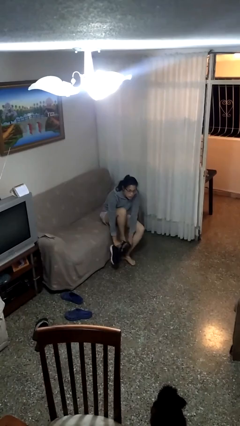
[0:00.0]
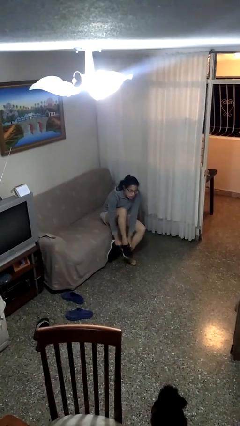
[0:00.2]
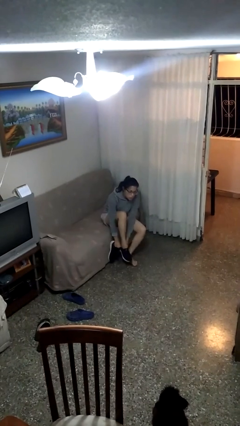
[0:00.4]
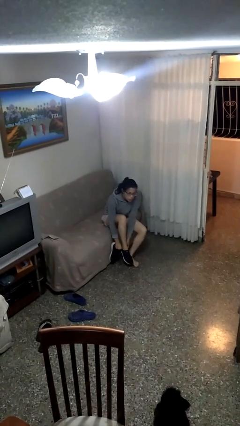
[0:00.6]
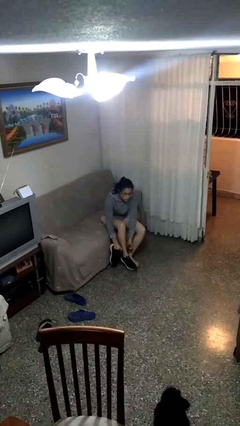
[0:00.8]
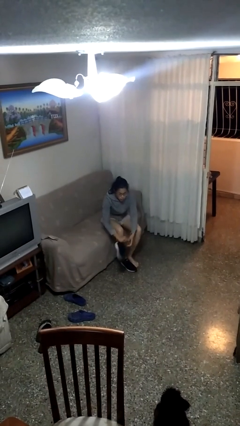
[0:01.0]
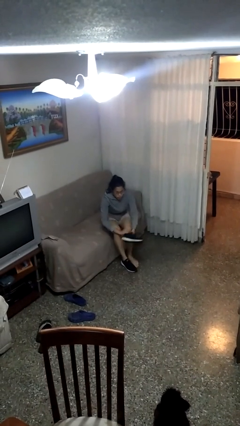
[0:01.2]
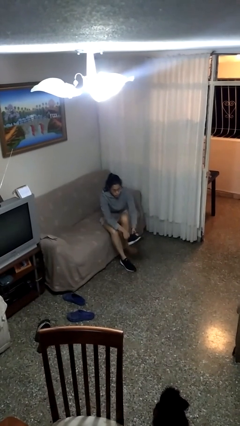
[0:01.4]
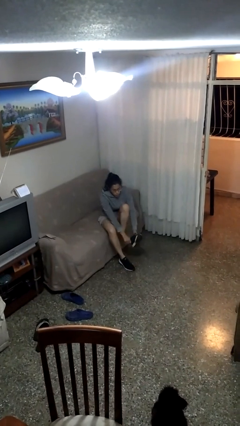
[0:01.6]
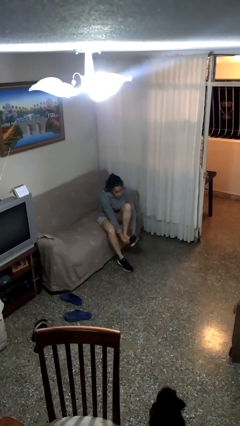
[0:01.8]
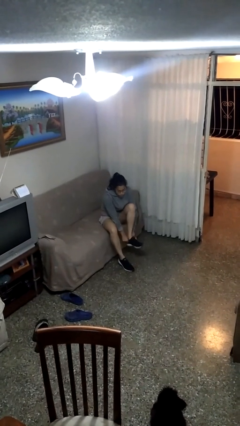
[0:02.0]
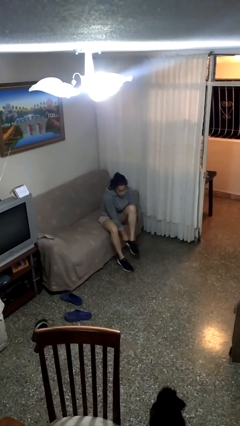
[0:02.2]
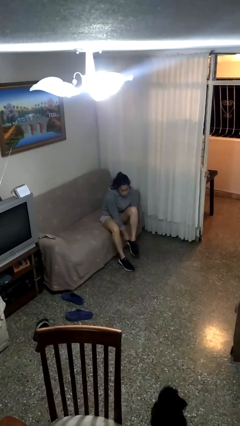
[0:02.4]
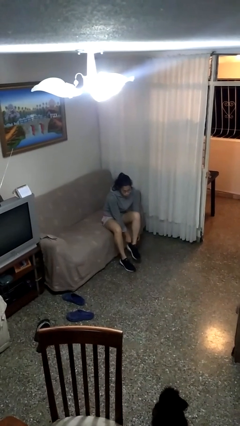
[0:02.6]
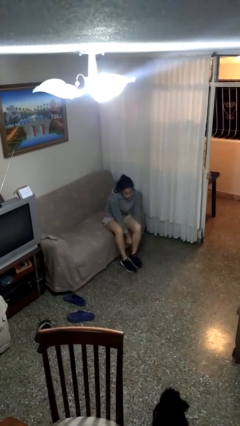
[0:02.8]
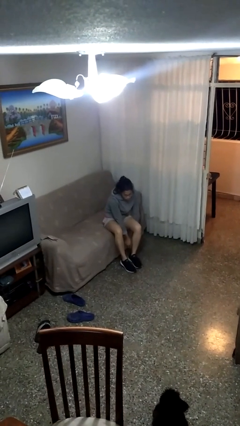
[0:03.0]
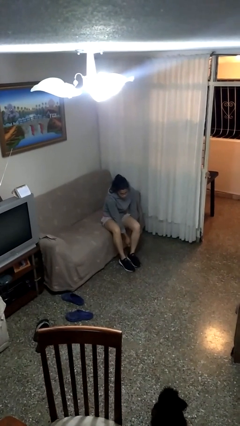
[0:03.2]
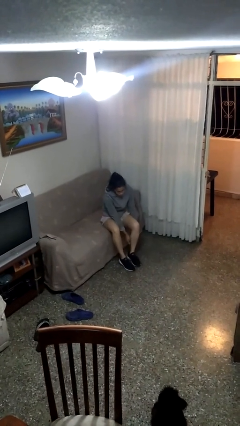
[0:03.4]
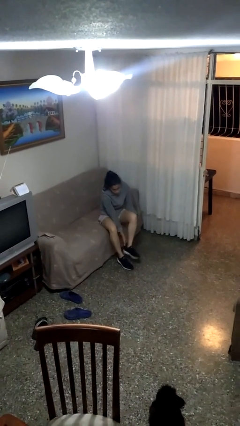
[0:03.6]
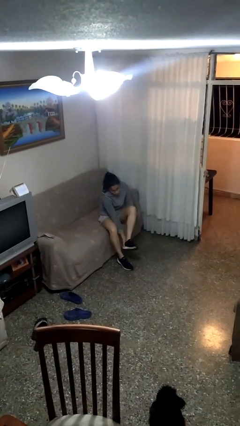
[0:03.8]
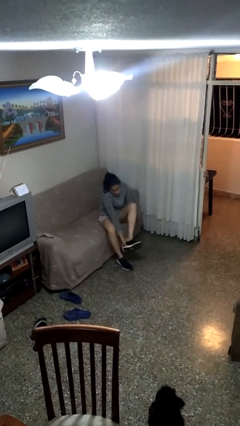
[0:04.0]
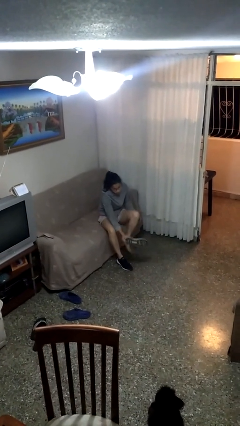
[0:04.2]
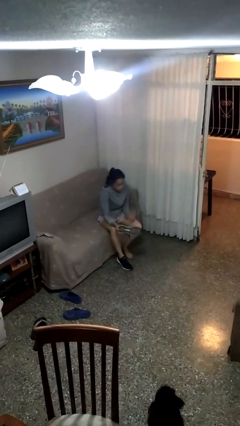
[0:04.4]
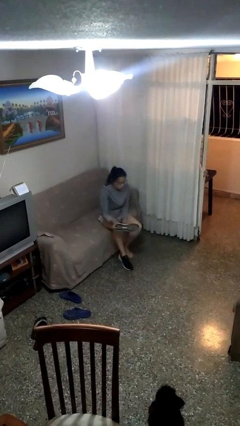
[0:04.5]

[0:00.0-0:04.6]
person puts on shoes

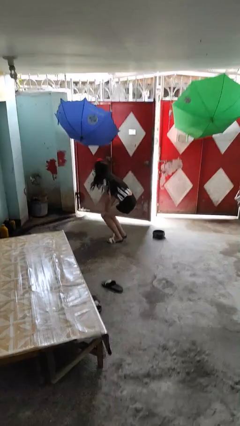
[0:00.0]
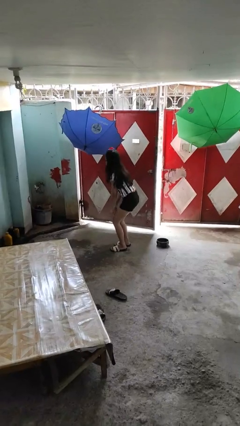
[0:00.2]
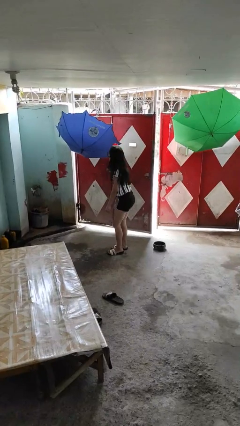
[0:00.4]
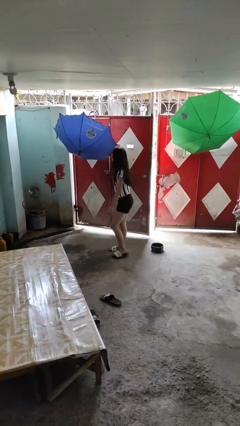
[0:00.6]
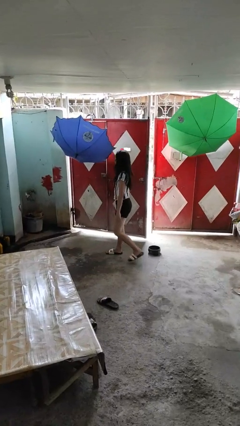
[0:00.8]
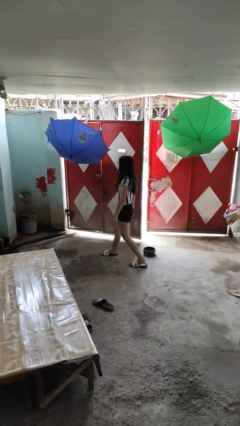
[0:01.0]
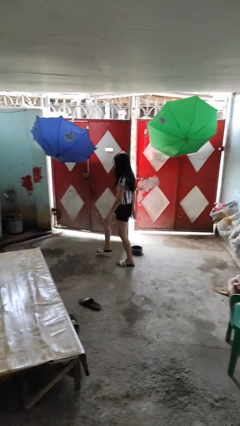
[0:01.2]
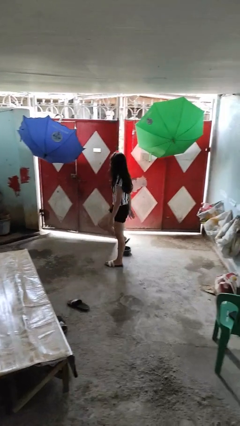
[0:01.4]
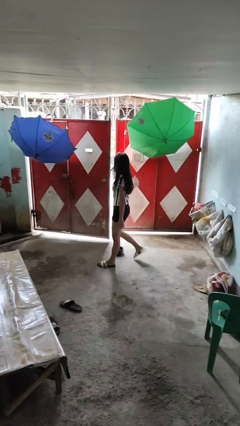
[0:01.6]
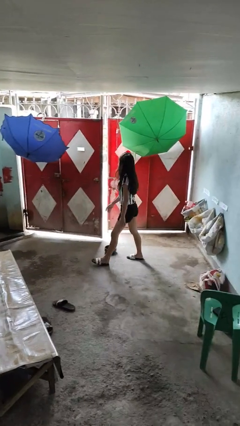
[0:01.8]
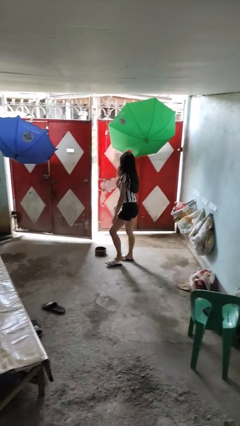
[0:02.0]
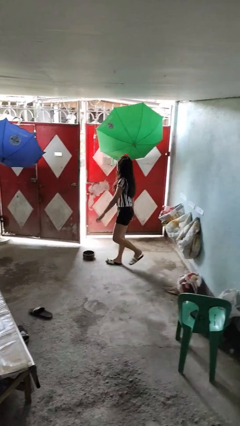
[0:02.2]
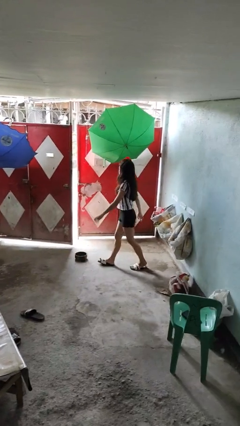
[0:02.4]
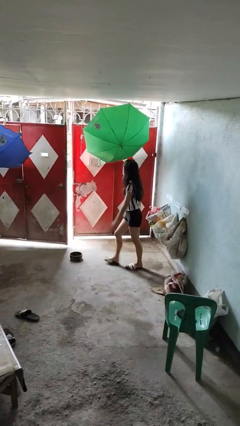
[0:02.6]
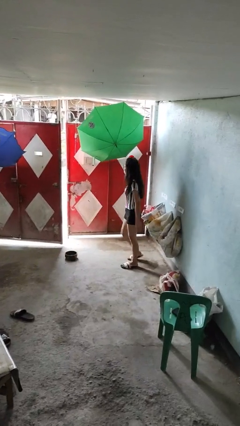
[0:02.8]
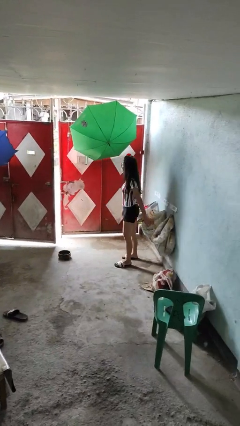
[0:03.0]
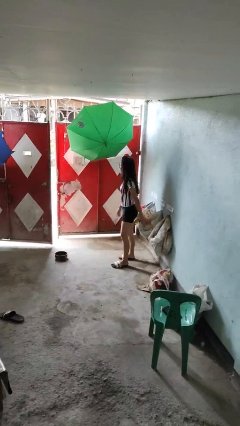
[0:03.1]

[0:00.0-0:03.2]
person stands up from floor

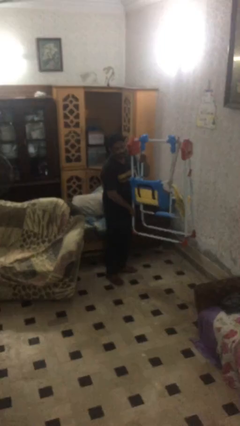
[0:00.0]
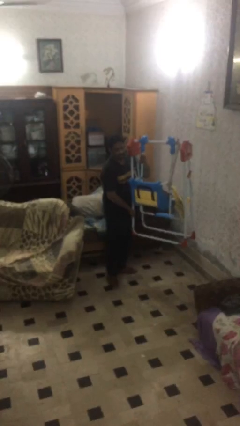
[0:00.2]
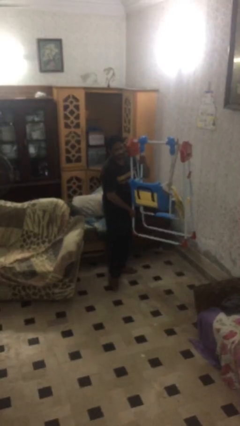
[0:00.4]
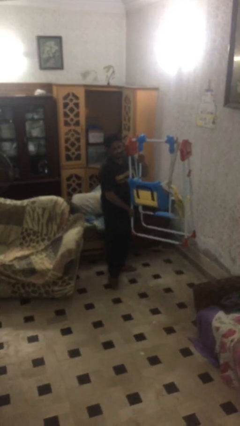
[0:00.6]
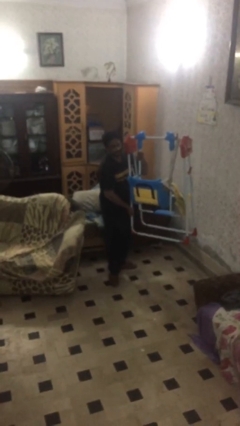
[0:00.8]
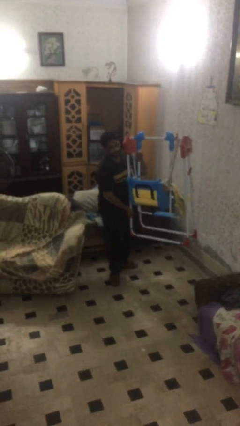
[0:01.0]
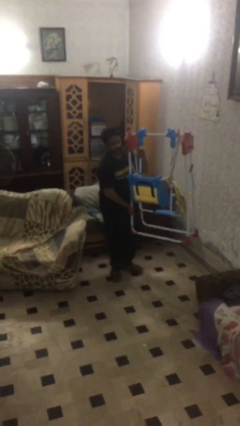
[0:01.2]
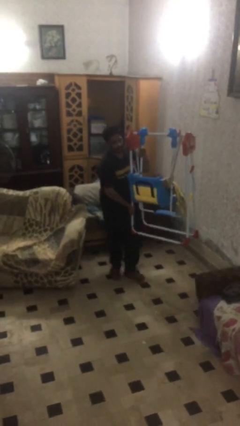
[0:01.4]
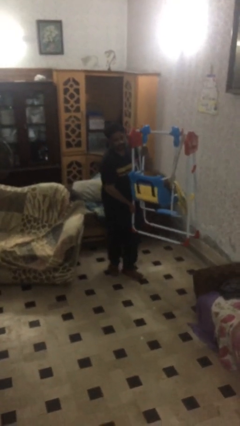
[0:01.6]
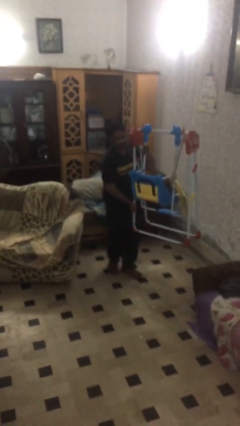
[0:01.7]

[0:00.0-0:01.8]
person carries heavy object

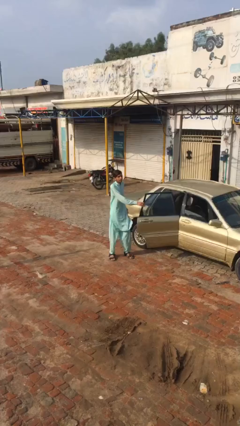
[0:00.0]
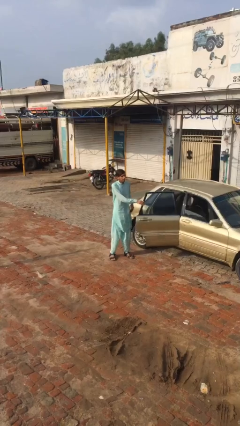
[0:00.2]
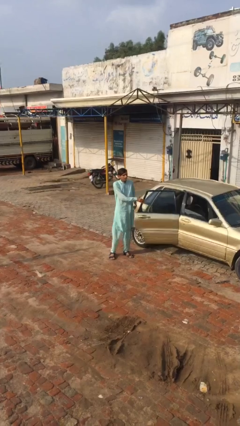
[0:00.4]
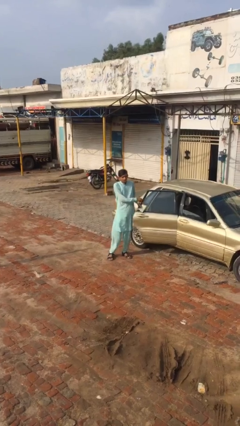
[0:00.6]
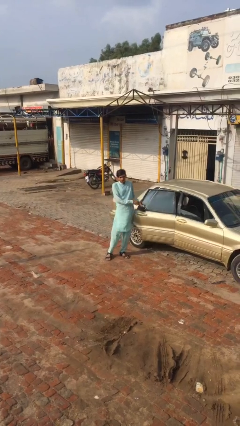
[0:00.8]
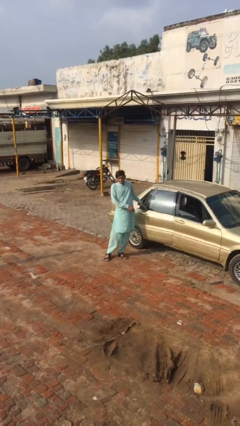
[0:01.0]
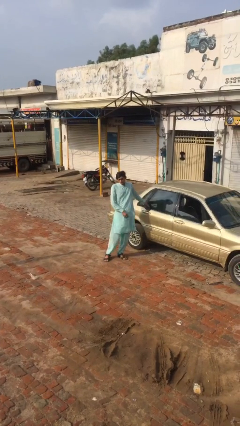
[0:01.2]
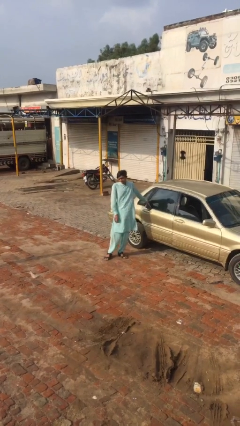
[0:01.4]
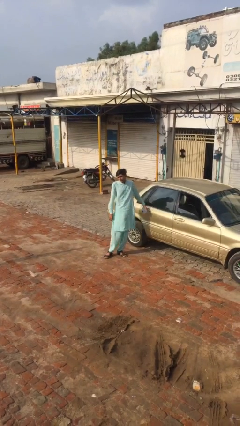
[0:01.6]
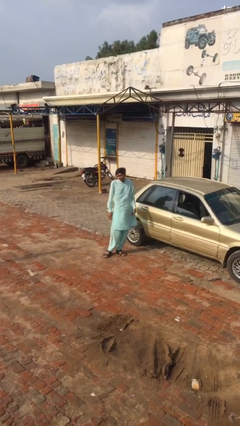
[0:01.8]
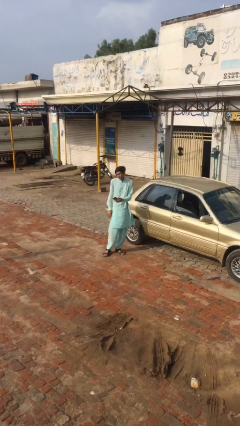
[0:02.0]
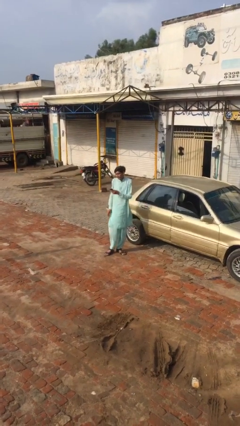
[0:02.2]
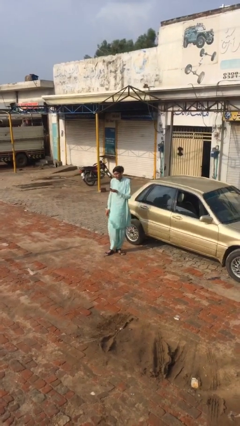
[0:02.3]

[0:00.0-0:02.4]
person closes car door

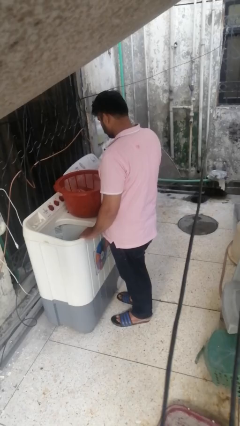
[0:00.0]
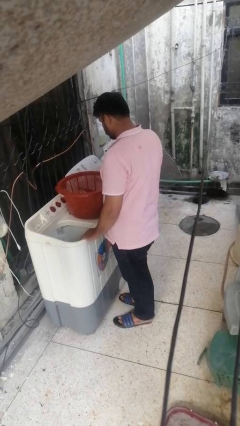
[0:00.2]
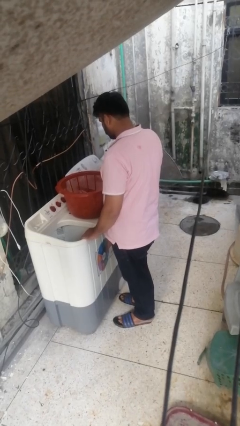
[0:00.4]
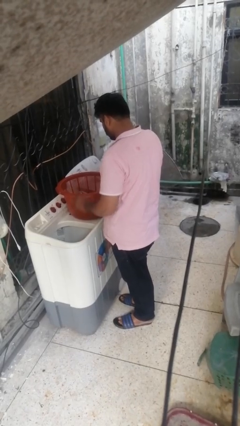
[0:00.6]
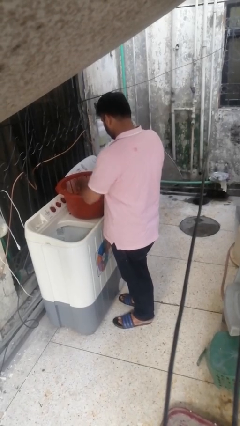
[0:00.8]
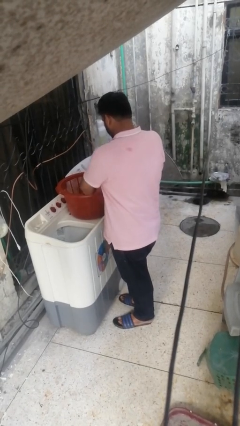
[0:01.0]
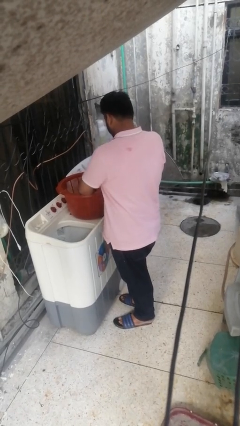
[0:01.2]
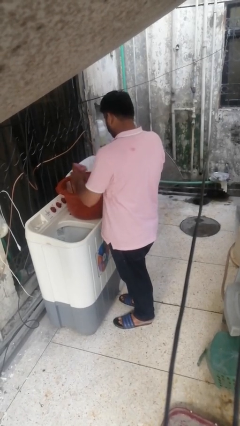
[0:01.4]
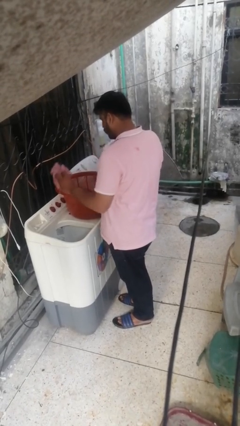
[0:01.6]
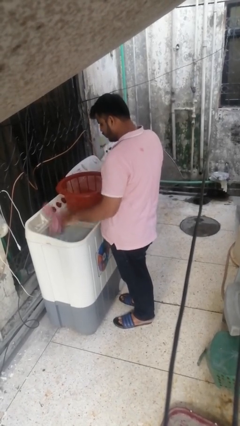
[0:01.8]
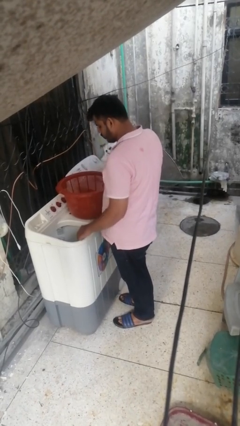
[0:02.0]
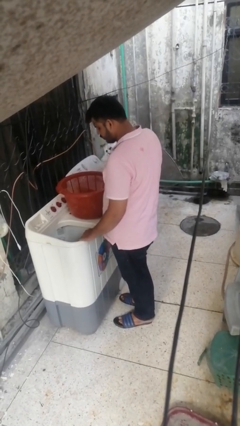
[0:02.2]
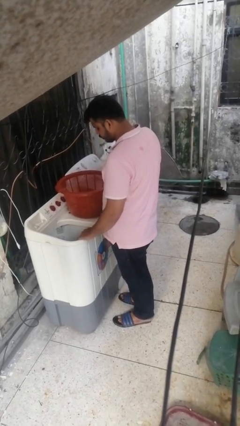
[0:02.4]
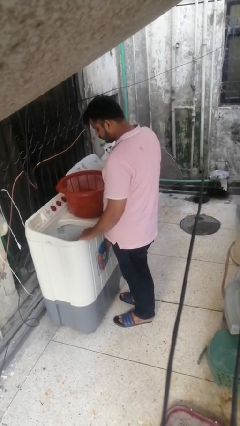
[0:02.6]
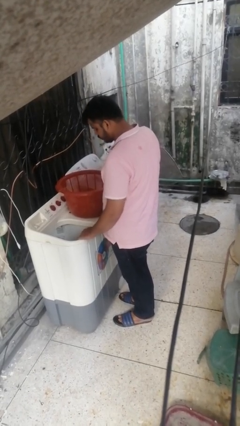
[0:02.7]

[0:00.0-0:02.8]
person loads clotheswasher

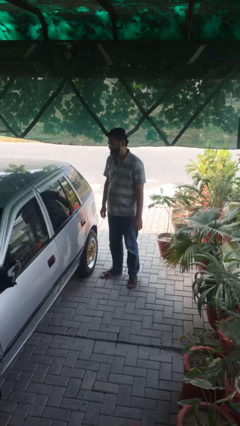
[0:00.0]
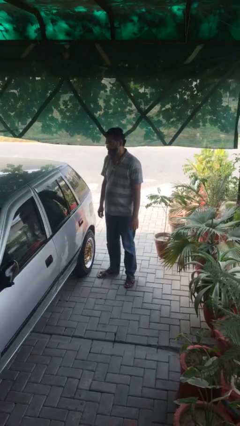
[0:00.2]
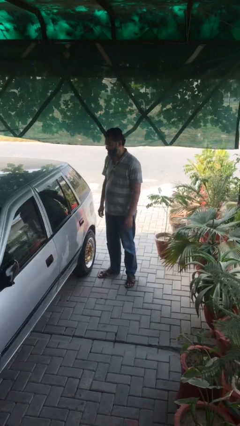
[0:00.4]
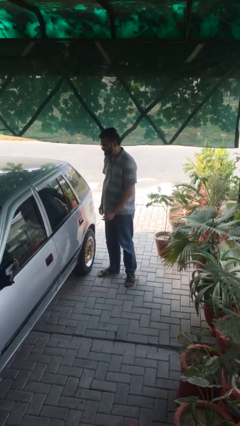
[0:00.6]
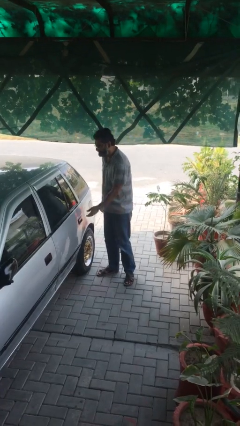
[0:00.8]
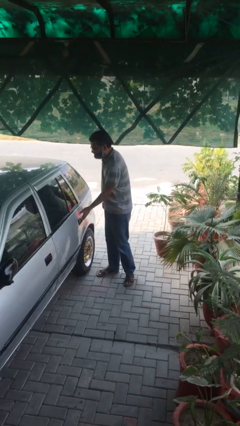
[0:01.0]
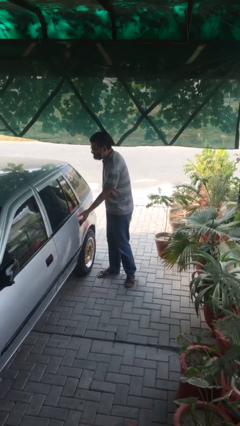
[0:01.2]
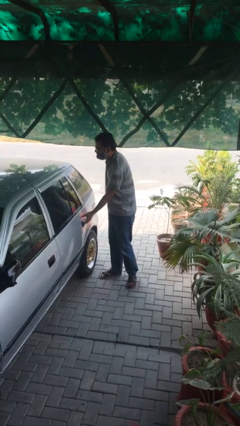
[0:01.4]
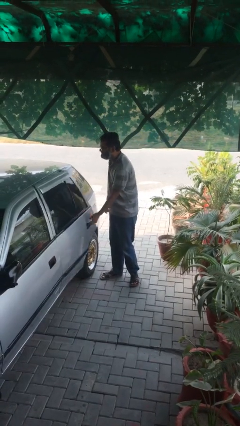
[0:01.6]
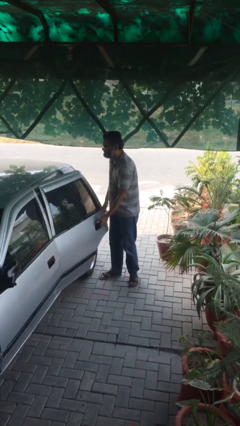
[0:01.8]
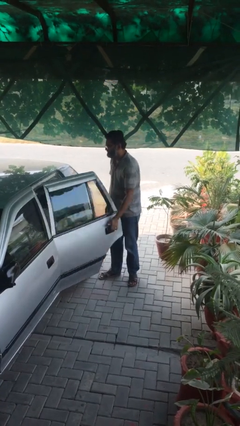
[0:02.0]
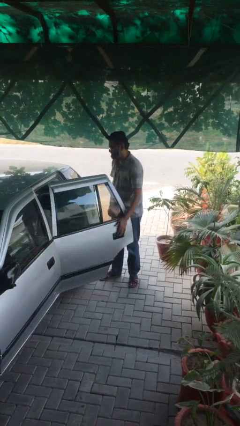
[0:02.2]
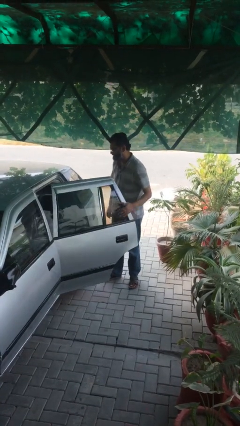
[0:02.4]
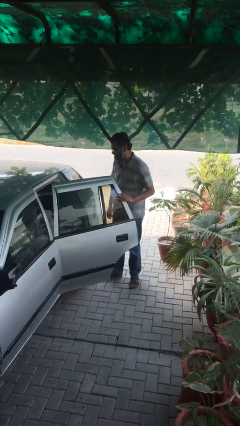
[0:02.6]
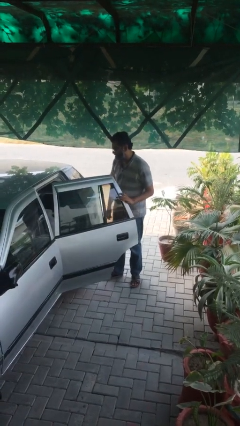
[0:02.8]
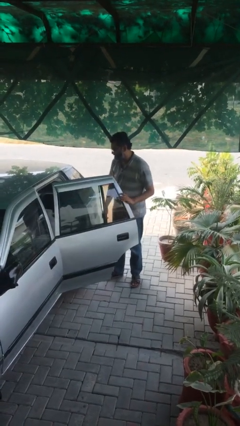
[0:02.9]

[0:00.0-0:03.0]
person opens car door
